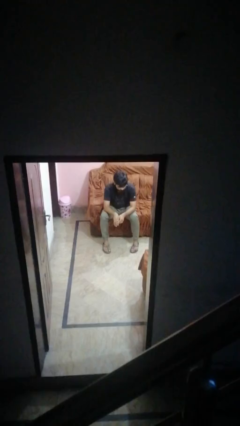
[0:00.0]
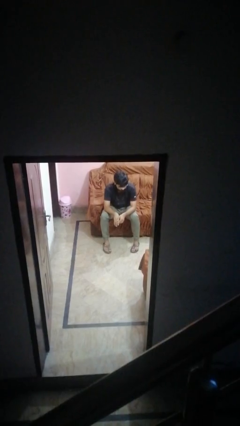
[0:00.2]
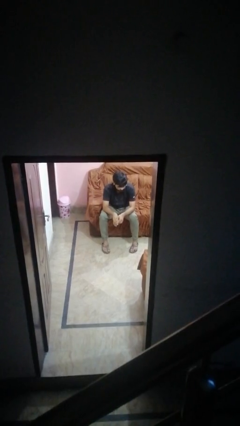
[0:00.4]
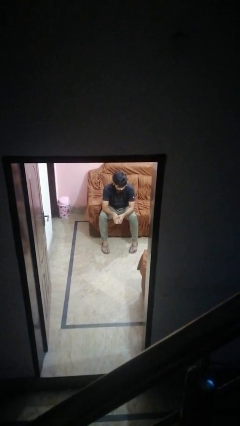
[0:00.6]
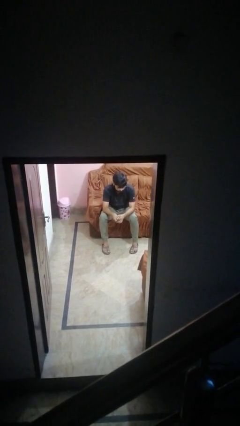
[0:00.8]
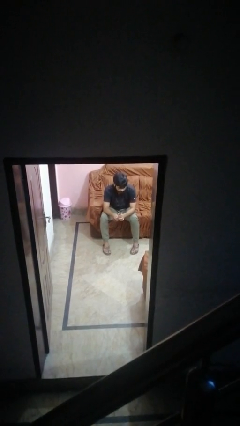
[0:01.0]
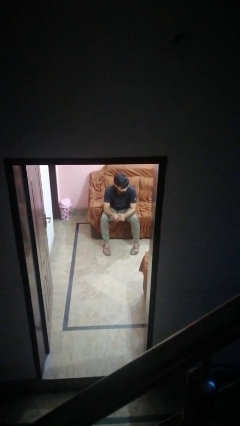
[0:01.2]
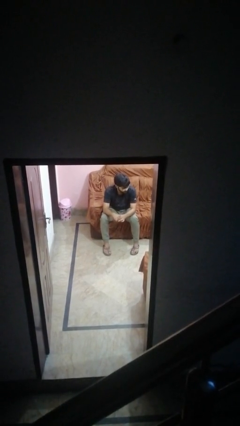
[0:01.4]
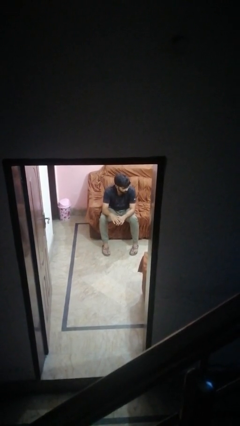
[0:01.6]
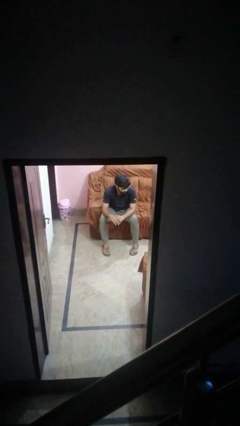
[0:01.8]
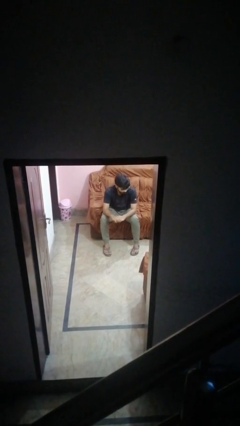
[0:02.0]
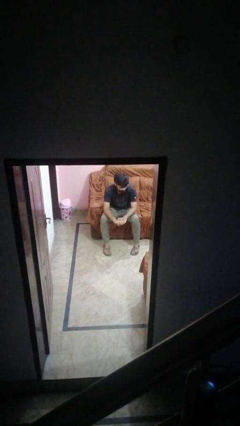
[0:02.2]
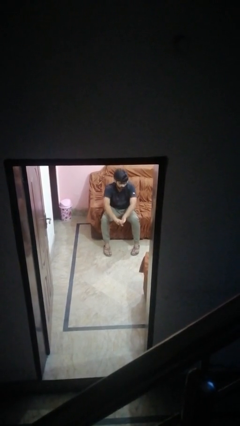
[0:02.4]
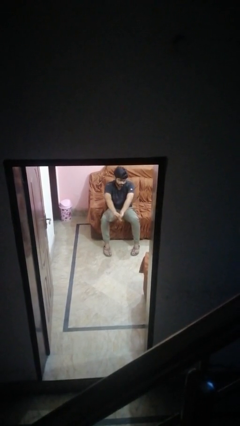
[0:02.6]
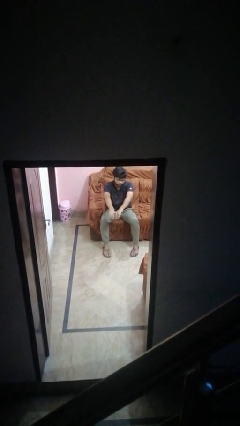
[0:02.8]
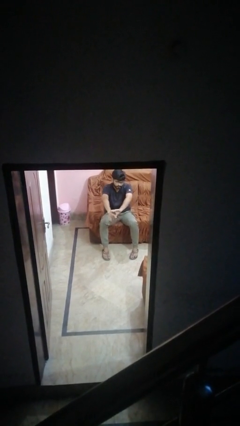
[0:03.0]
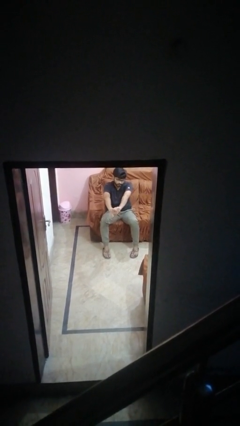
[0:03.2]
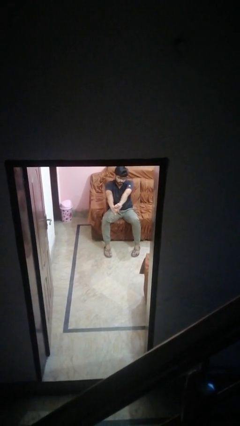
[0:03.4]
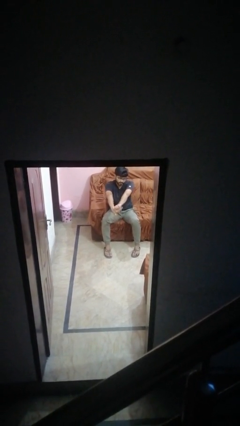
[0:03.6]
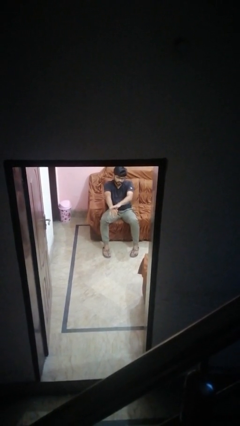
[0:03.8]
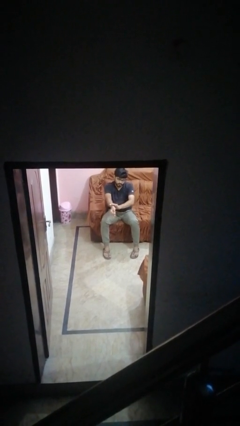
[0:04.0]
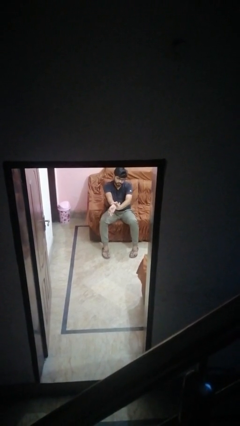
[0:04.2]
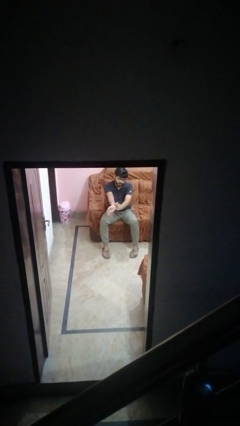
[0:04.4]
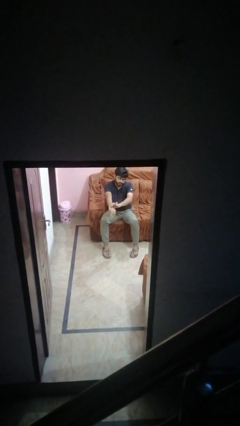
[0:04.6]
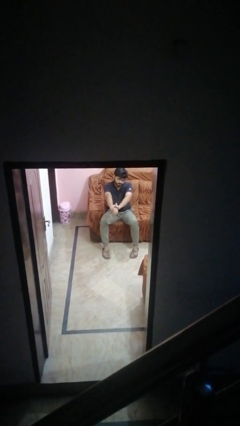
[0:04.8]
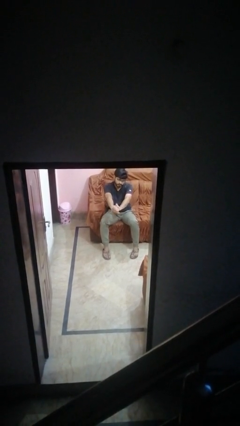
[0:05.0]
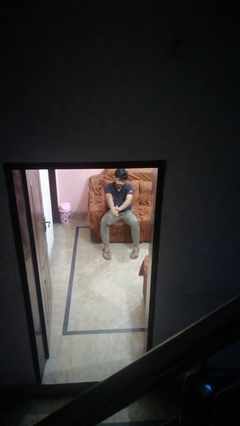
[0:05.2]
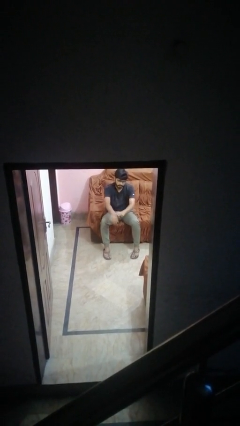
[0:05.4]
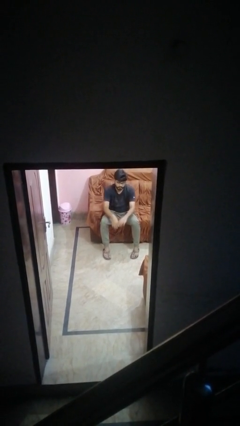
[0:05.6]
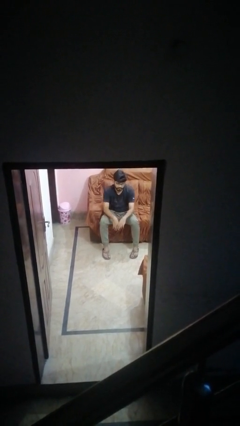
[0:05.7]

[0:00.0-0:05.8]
person cracks knuckles

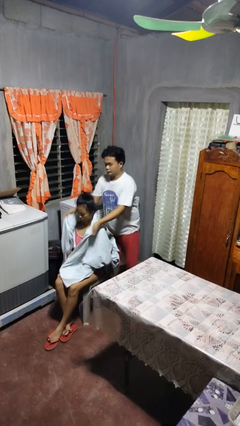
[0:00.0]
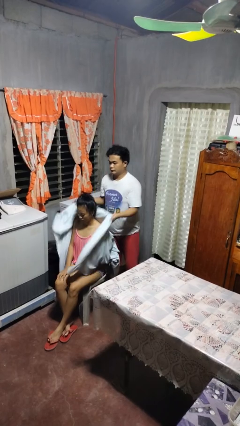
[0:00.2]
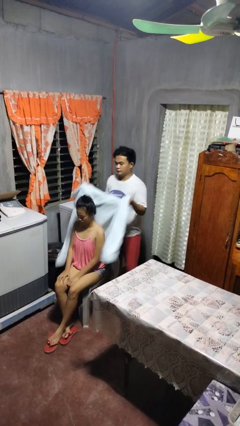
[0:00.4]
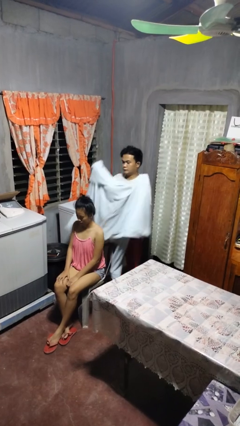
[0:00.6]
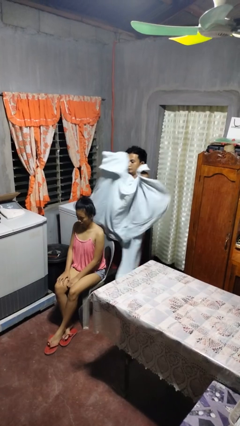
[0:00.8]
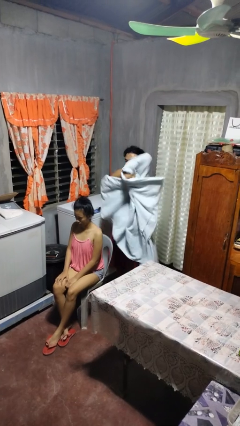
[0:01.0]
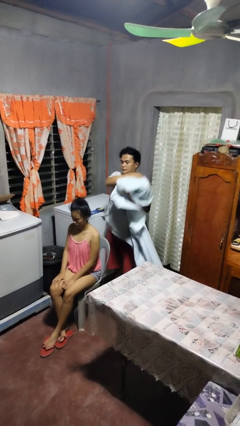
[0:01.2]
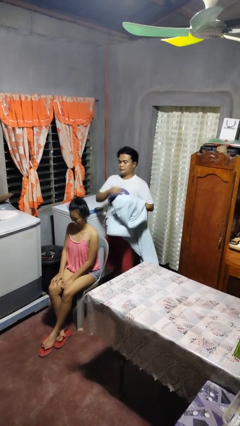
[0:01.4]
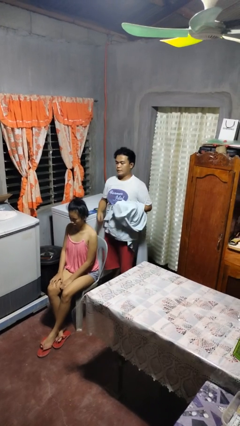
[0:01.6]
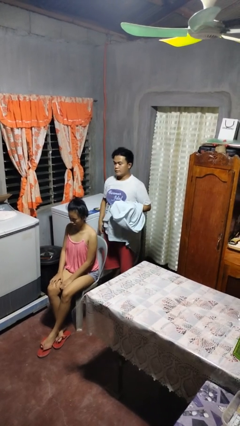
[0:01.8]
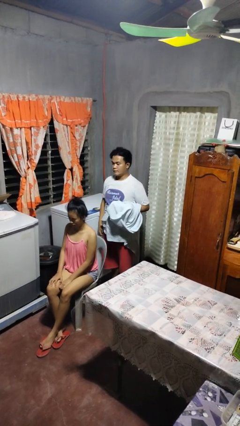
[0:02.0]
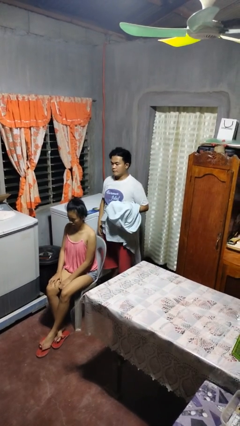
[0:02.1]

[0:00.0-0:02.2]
person uncovers friend with blanket

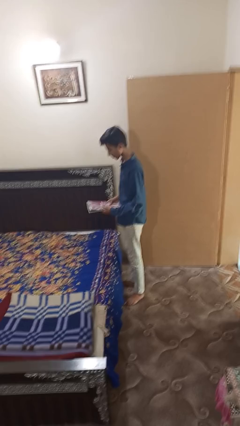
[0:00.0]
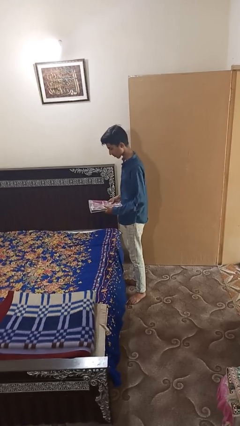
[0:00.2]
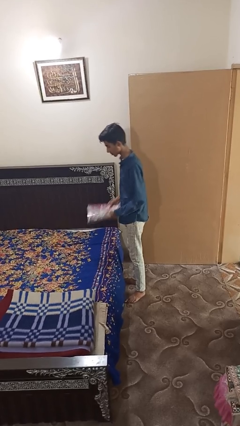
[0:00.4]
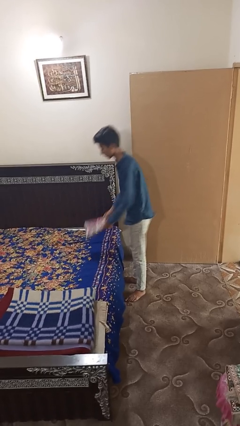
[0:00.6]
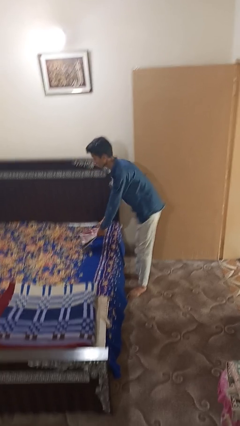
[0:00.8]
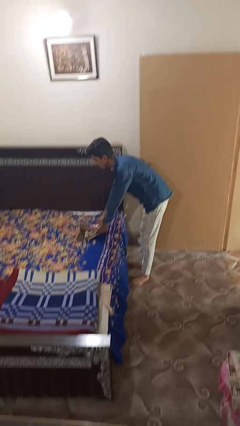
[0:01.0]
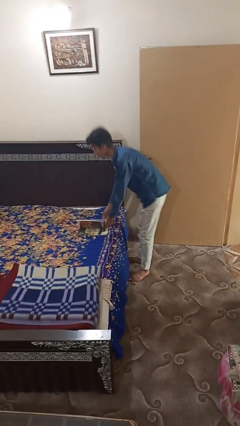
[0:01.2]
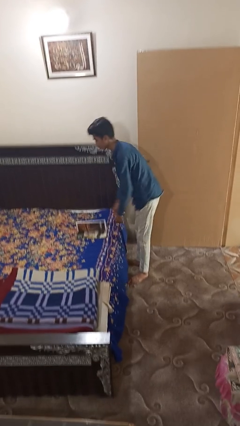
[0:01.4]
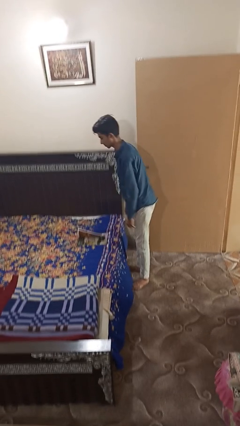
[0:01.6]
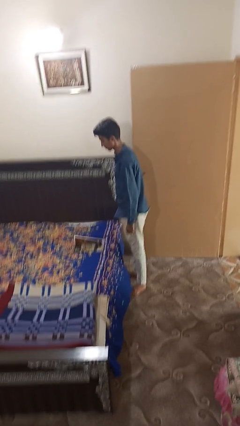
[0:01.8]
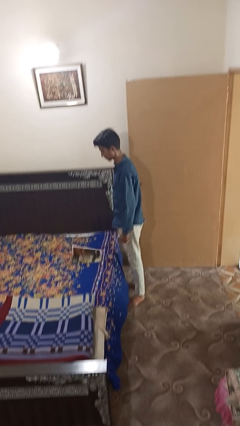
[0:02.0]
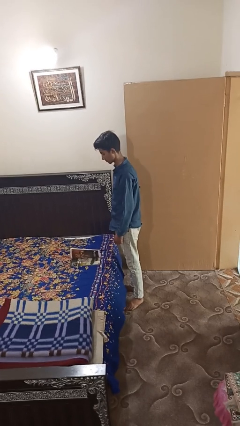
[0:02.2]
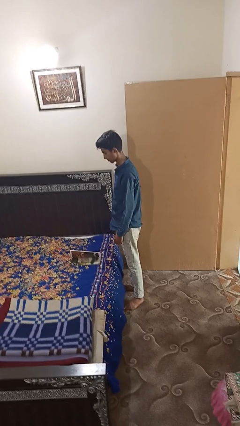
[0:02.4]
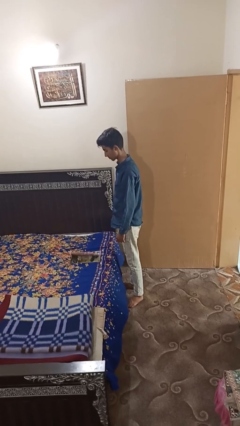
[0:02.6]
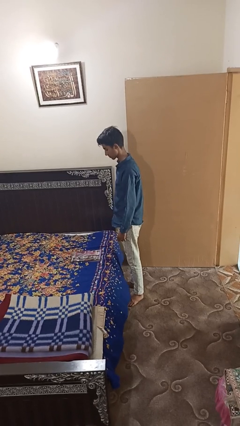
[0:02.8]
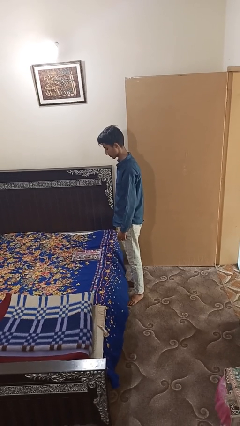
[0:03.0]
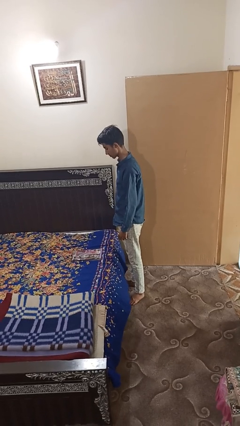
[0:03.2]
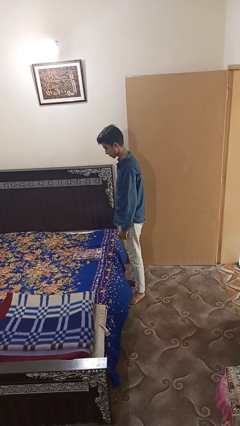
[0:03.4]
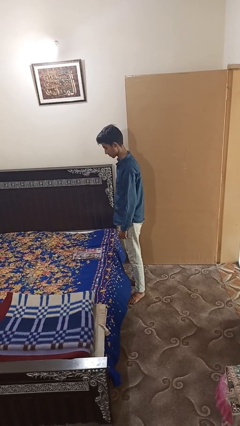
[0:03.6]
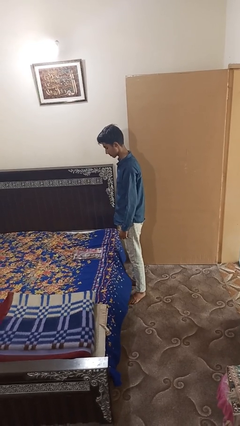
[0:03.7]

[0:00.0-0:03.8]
person puts down object on bed

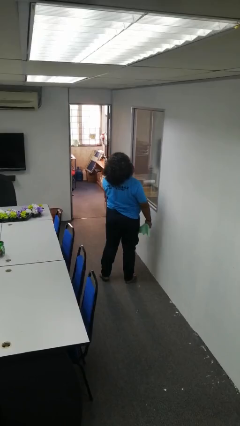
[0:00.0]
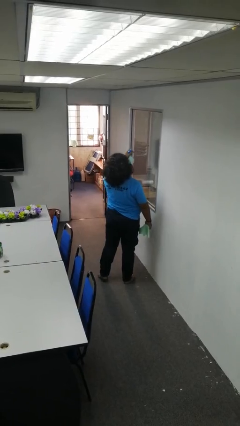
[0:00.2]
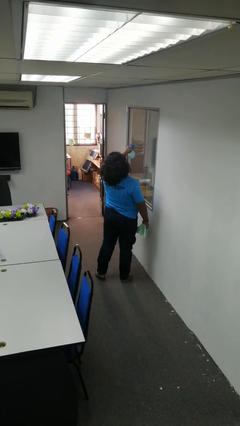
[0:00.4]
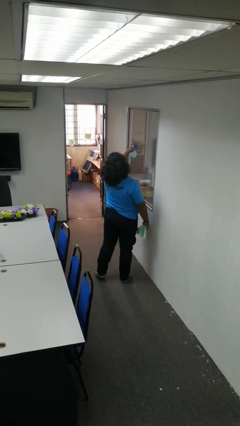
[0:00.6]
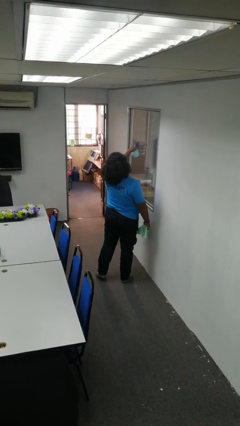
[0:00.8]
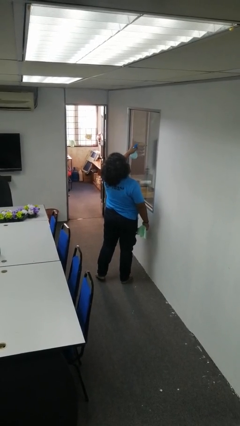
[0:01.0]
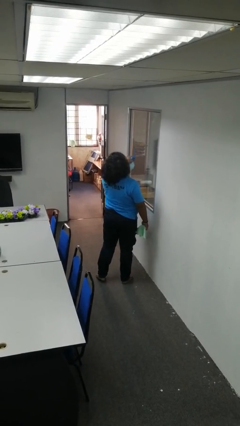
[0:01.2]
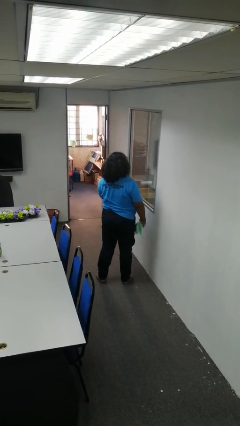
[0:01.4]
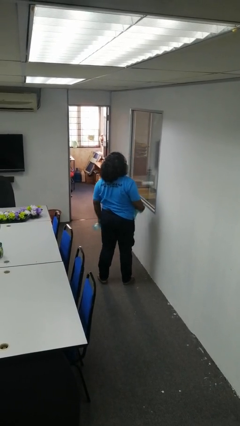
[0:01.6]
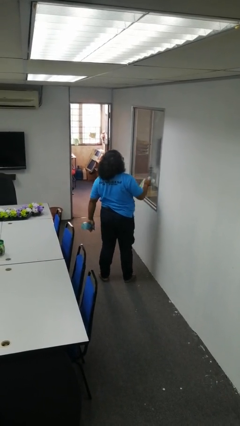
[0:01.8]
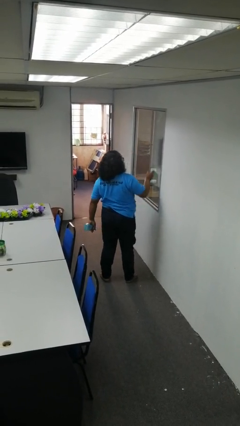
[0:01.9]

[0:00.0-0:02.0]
person sprays from bottle

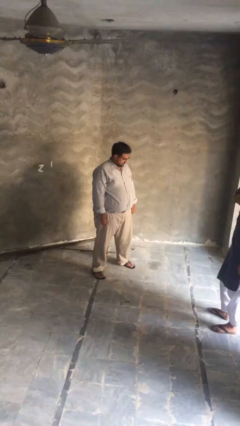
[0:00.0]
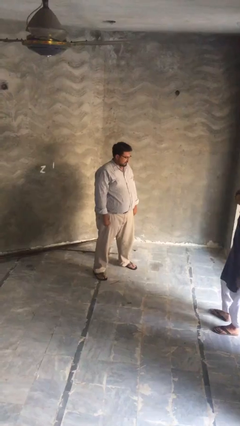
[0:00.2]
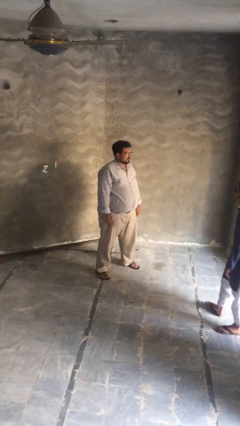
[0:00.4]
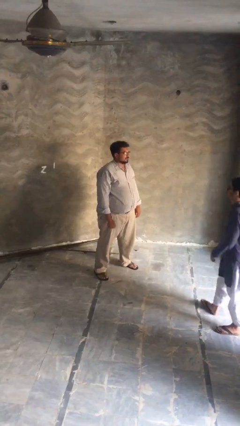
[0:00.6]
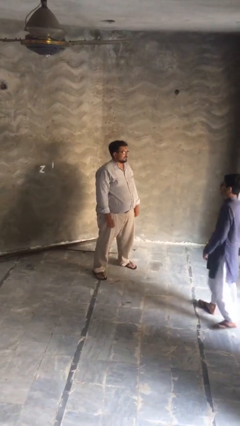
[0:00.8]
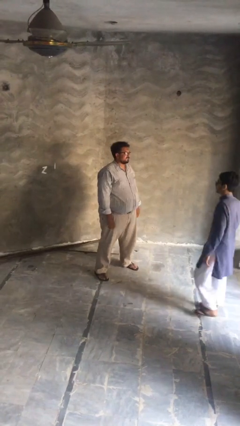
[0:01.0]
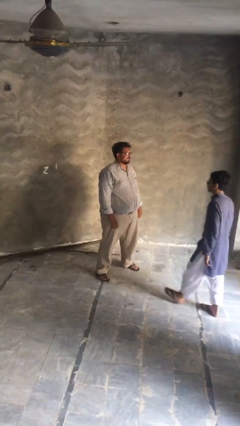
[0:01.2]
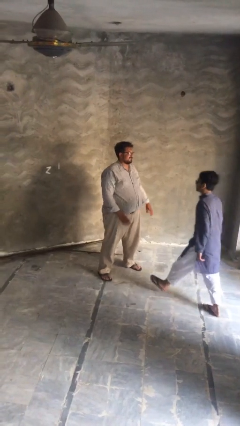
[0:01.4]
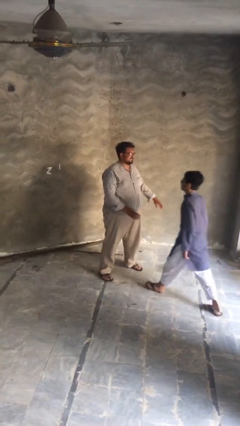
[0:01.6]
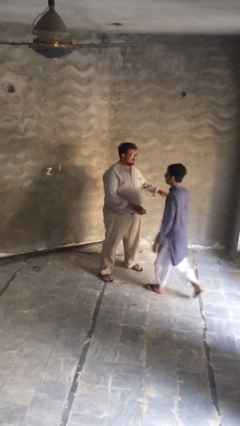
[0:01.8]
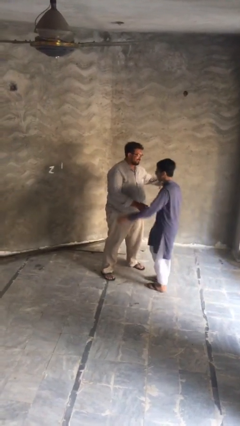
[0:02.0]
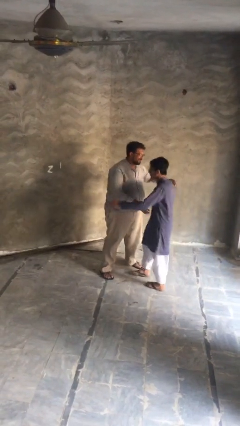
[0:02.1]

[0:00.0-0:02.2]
person embraces person

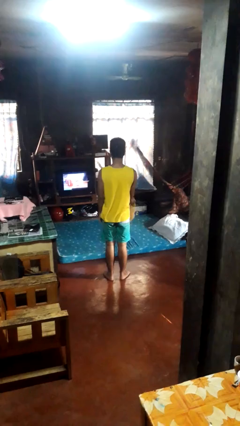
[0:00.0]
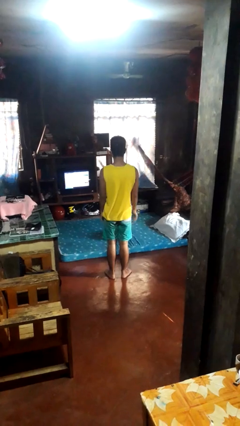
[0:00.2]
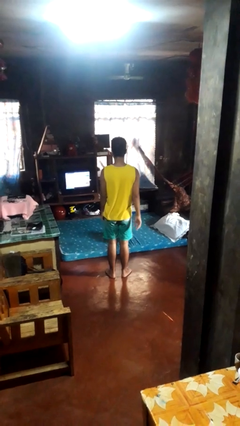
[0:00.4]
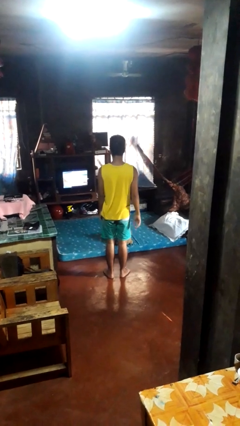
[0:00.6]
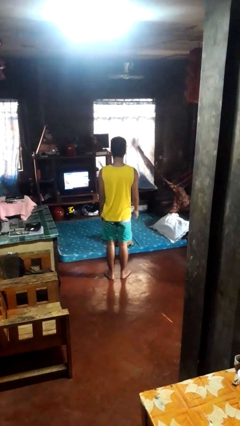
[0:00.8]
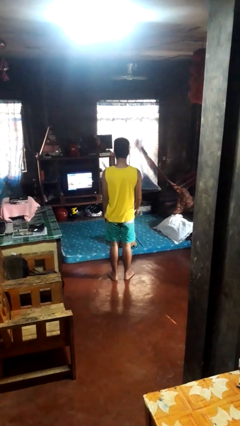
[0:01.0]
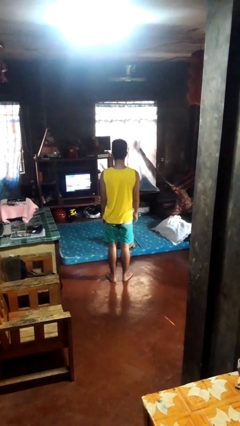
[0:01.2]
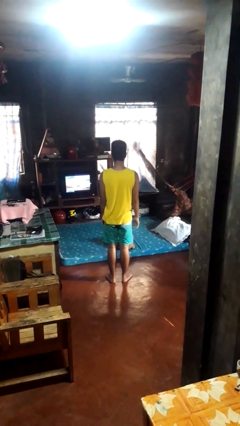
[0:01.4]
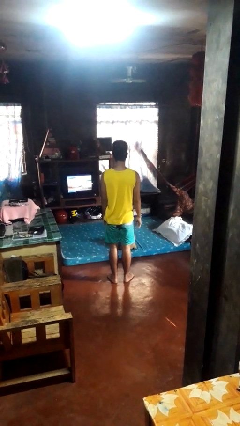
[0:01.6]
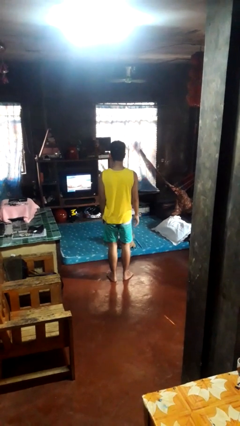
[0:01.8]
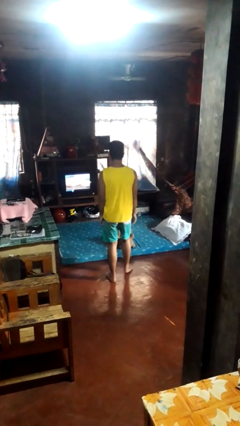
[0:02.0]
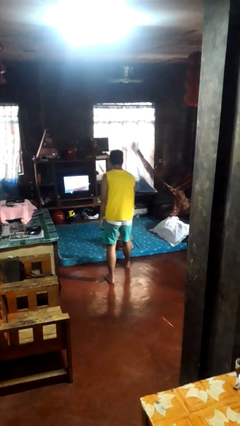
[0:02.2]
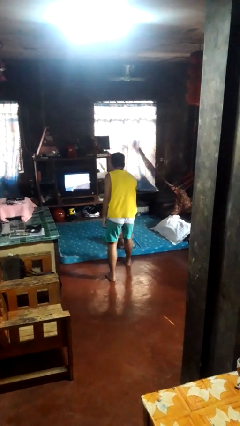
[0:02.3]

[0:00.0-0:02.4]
person throws object on bed
